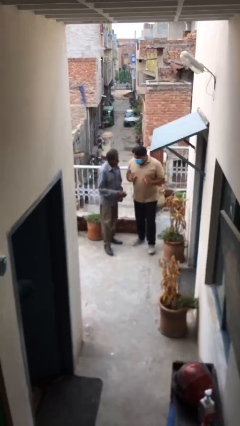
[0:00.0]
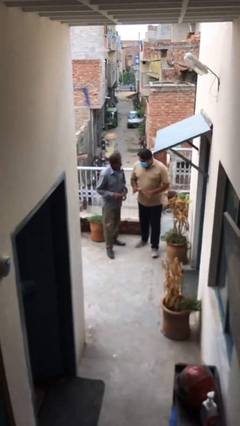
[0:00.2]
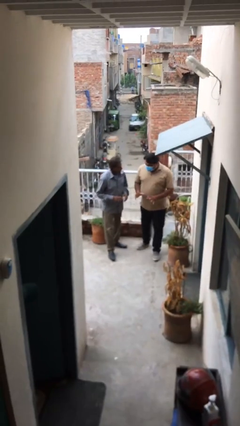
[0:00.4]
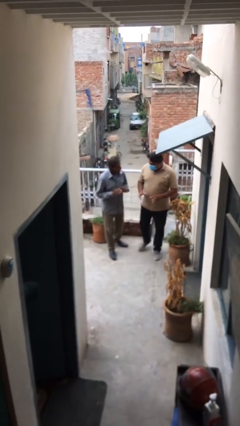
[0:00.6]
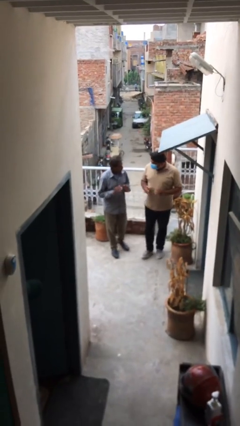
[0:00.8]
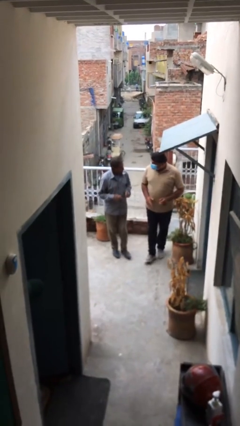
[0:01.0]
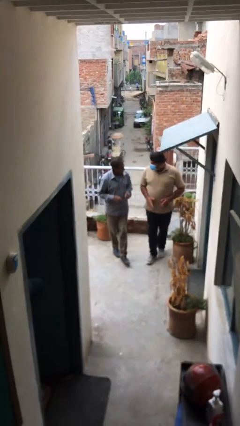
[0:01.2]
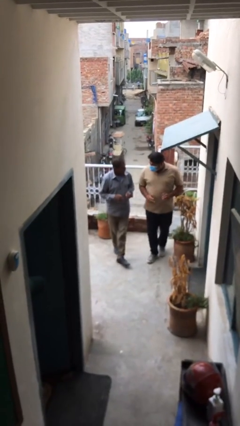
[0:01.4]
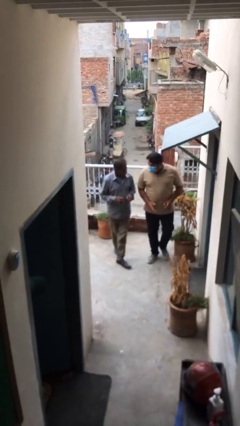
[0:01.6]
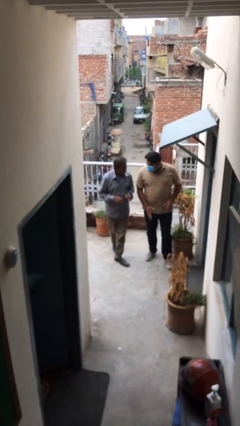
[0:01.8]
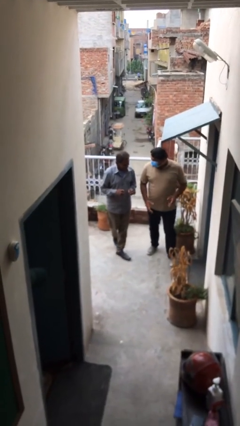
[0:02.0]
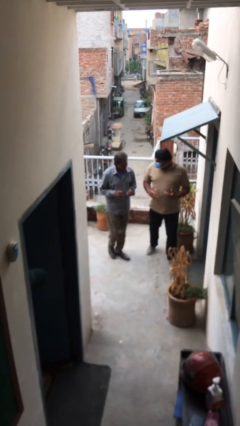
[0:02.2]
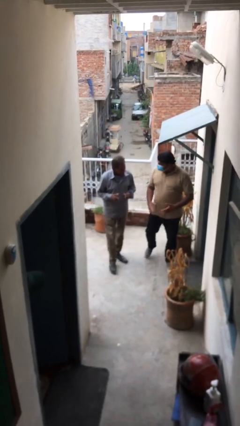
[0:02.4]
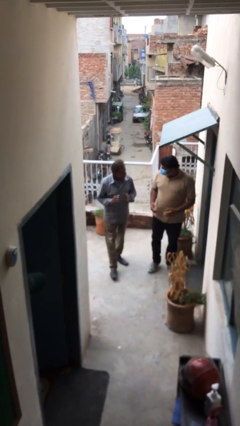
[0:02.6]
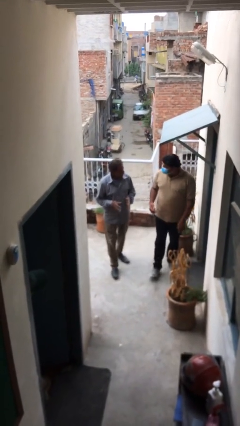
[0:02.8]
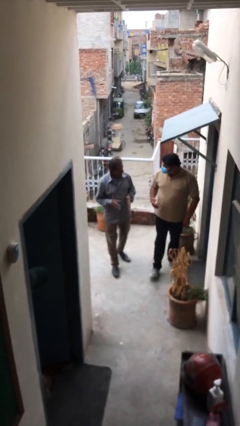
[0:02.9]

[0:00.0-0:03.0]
person talks to person

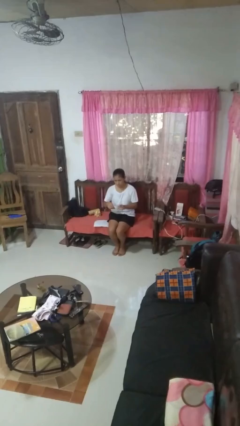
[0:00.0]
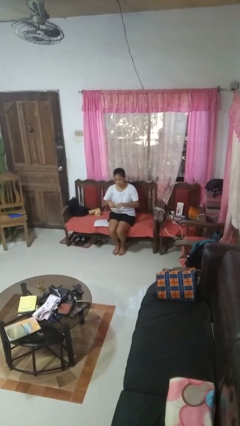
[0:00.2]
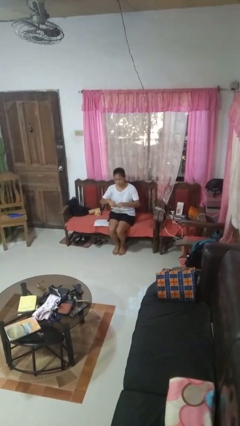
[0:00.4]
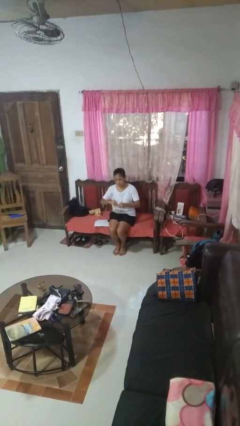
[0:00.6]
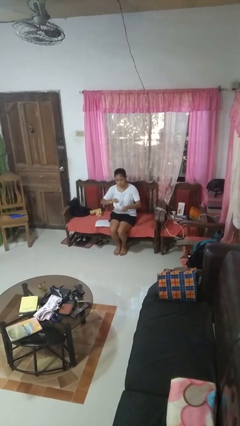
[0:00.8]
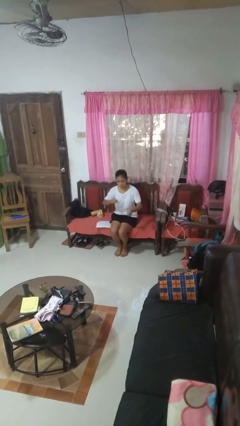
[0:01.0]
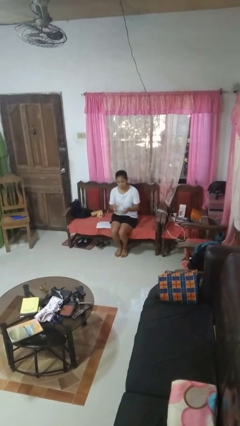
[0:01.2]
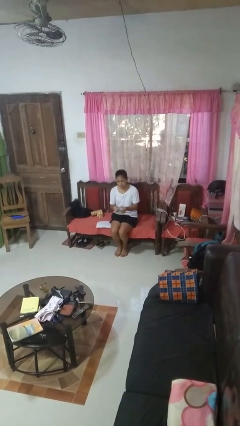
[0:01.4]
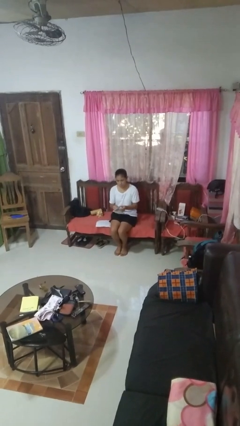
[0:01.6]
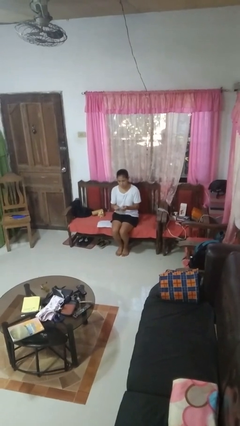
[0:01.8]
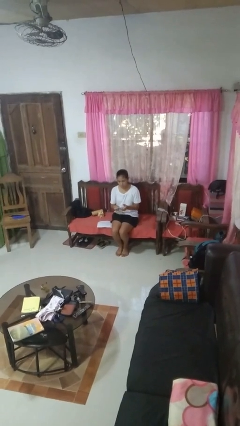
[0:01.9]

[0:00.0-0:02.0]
person tears paper

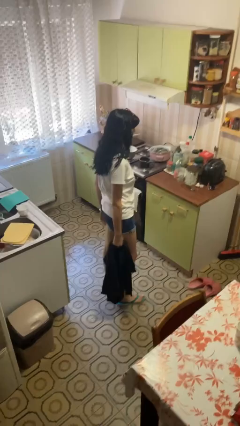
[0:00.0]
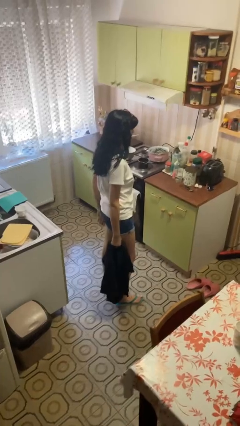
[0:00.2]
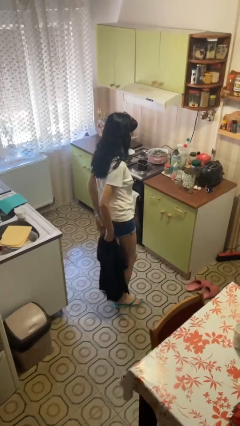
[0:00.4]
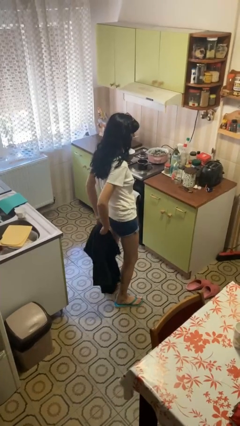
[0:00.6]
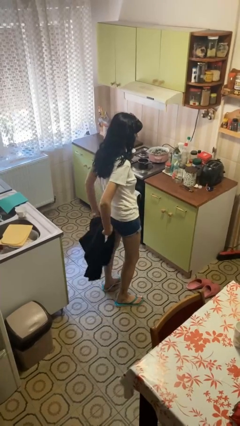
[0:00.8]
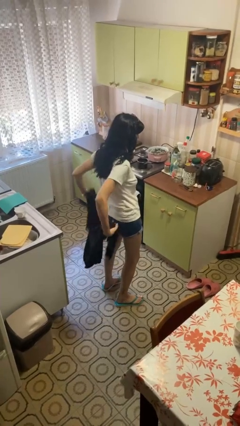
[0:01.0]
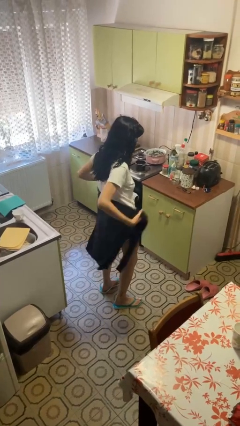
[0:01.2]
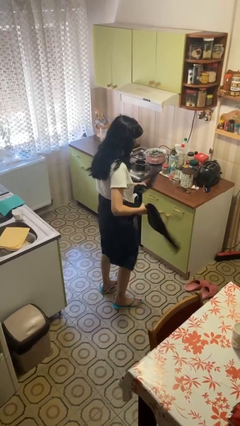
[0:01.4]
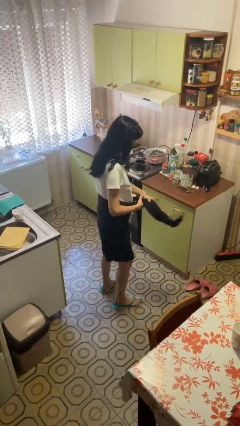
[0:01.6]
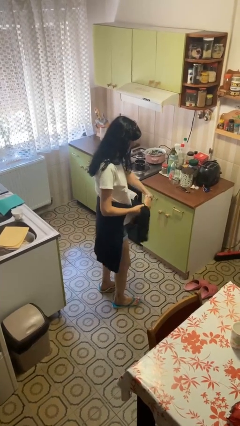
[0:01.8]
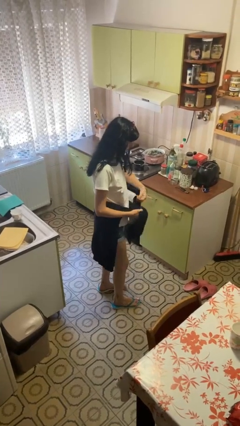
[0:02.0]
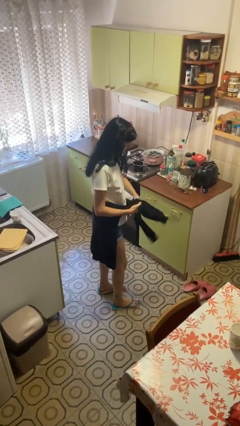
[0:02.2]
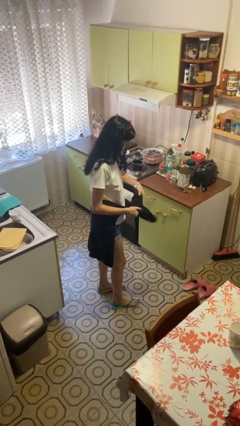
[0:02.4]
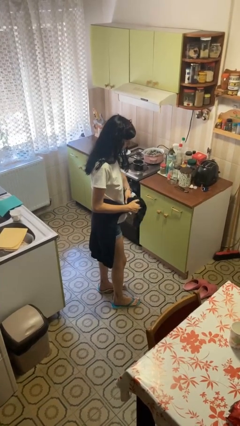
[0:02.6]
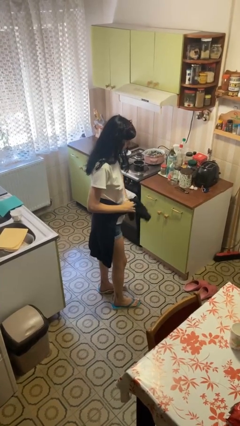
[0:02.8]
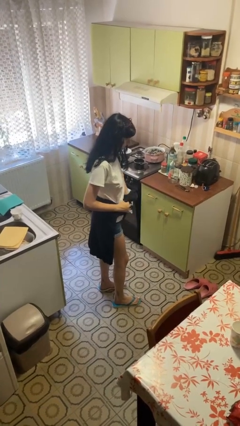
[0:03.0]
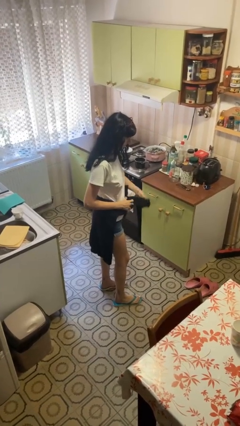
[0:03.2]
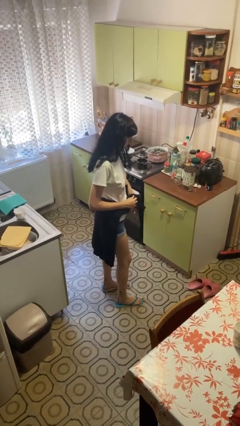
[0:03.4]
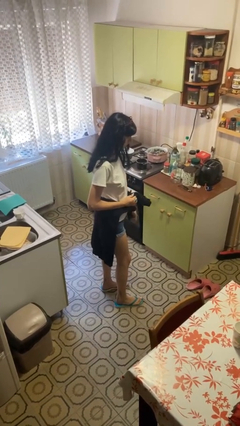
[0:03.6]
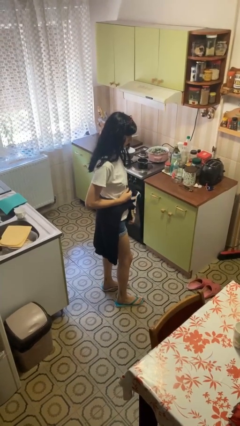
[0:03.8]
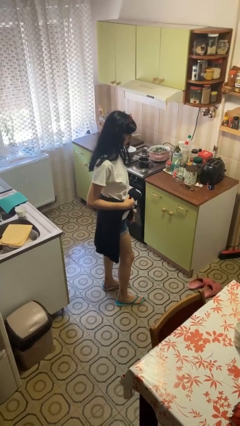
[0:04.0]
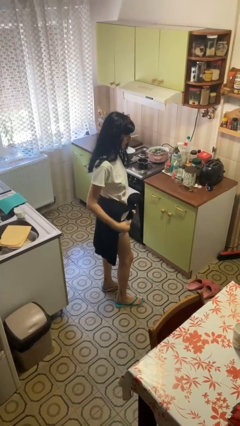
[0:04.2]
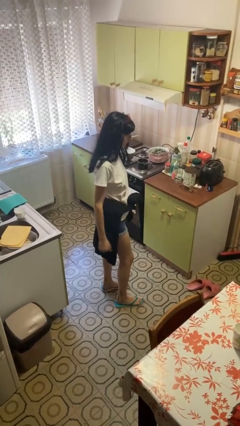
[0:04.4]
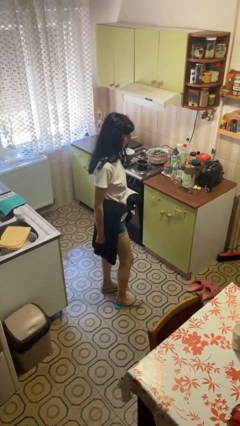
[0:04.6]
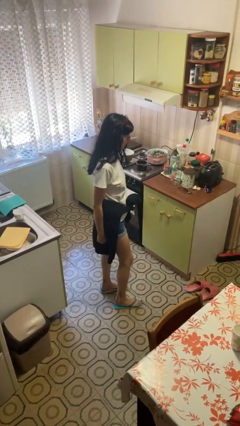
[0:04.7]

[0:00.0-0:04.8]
person ties jacket around waist

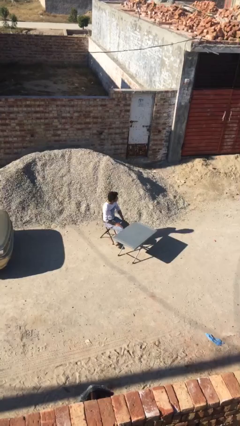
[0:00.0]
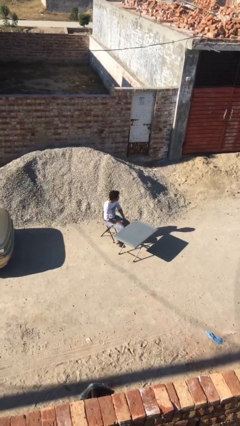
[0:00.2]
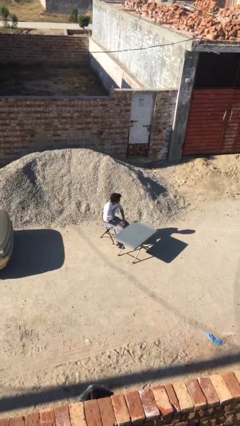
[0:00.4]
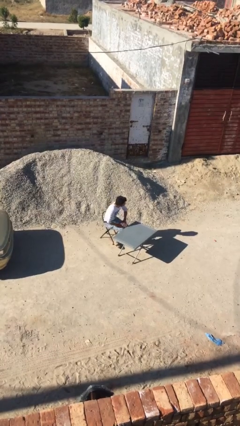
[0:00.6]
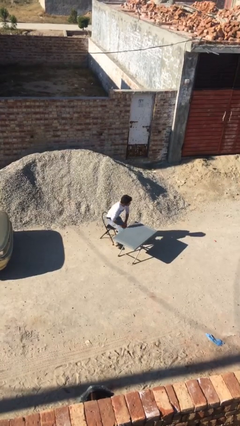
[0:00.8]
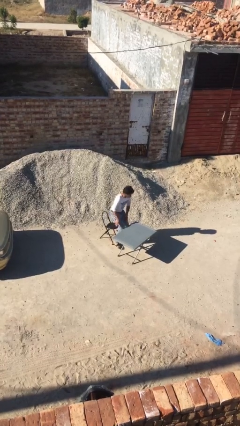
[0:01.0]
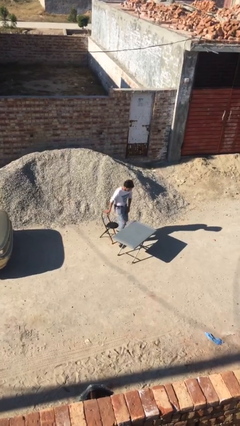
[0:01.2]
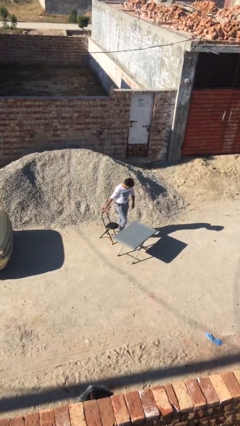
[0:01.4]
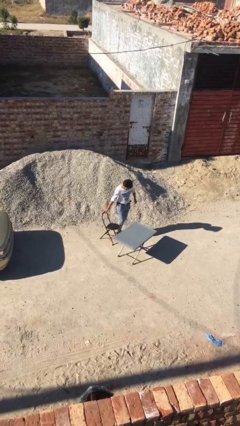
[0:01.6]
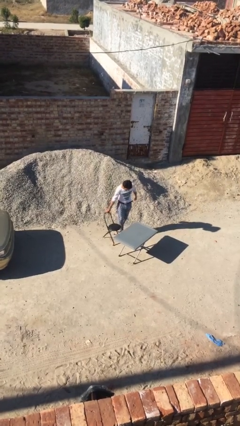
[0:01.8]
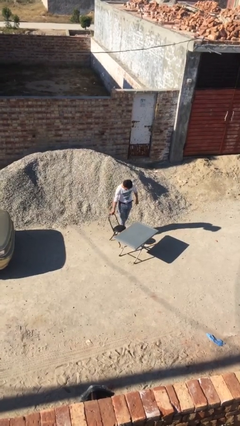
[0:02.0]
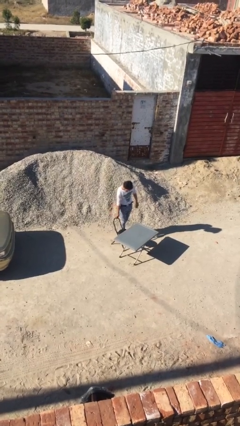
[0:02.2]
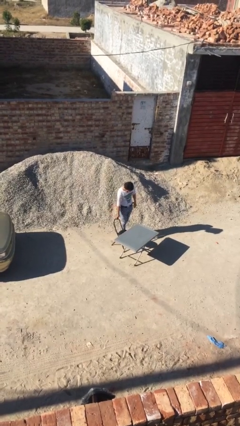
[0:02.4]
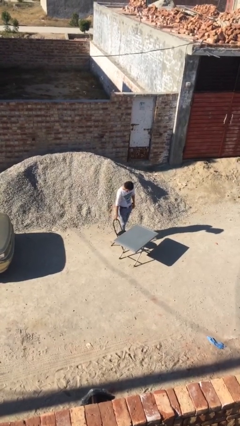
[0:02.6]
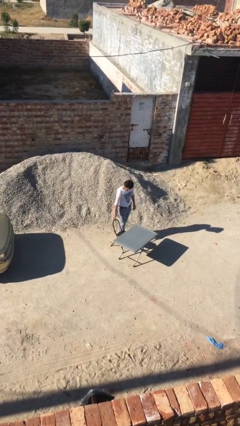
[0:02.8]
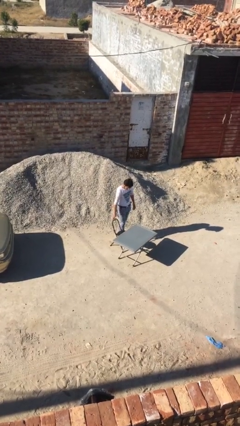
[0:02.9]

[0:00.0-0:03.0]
person stands up

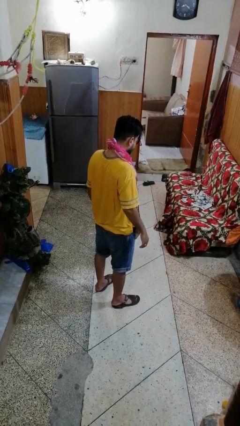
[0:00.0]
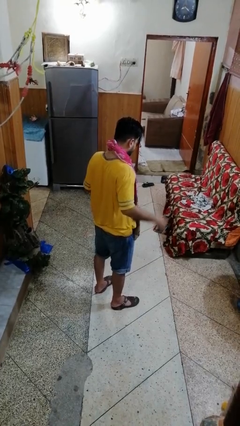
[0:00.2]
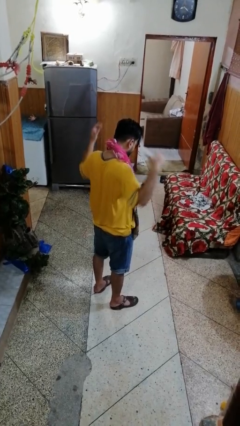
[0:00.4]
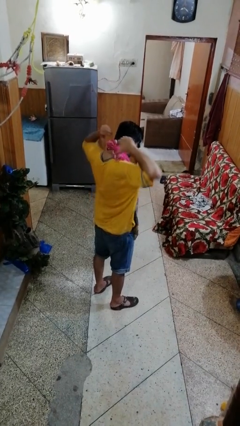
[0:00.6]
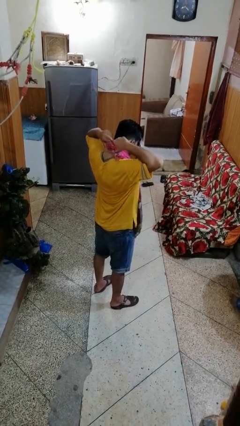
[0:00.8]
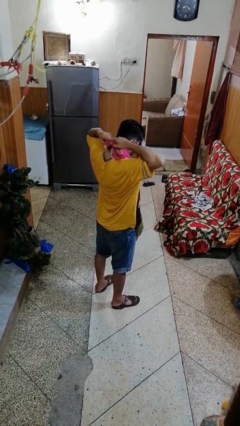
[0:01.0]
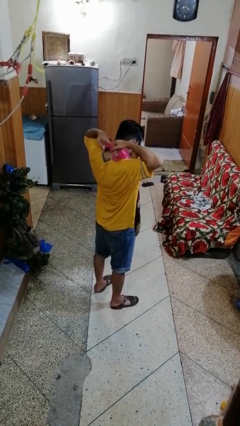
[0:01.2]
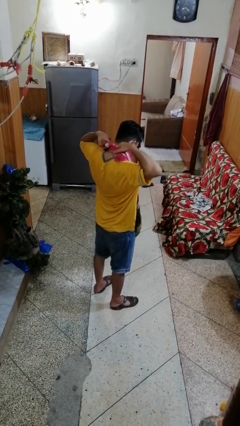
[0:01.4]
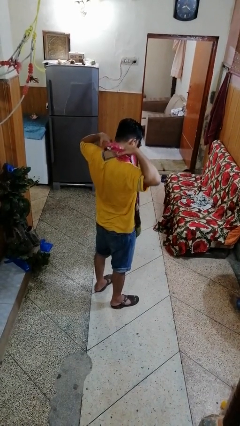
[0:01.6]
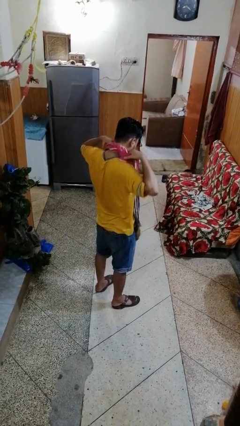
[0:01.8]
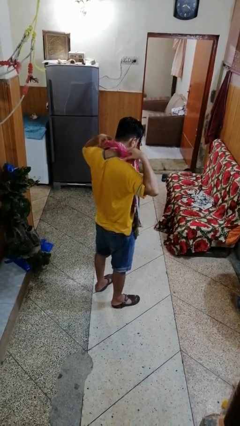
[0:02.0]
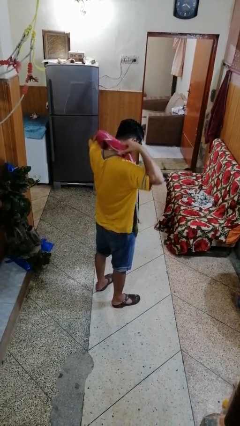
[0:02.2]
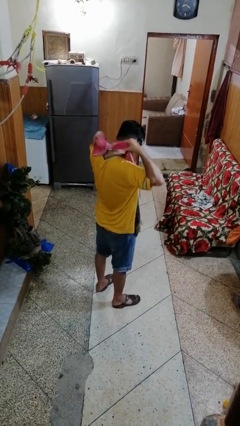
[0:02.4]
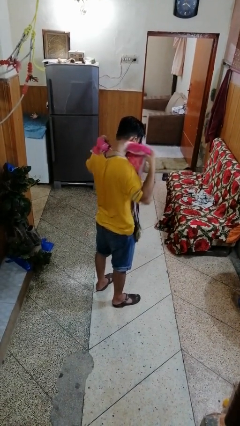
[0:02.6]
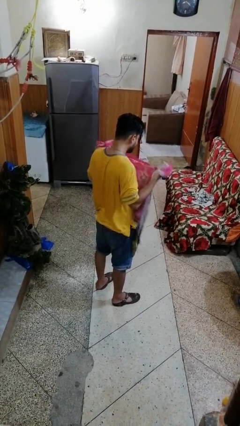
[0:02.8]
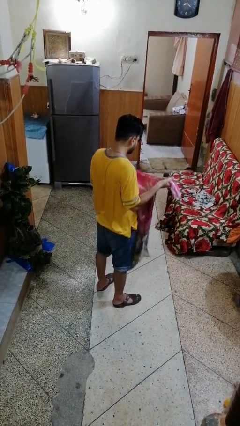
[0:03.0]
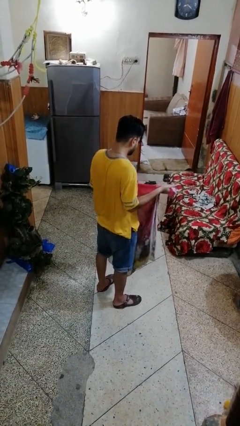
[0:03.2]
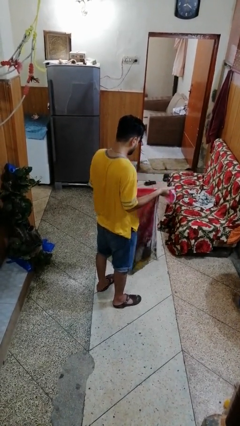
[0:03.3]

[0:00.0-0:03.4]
person takes off apron

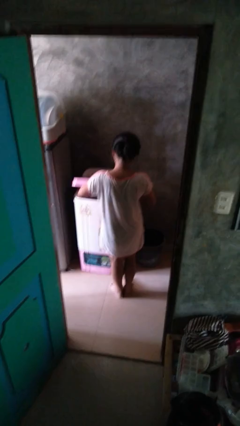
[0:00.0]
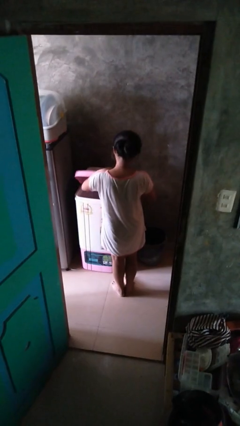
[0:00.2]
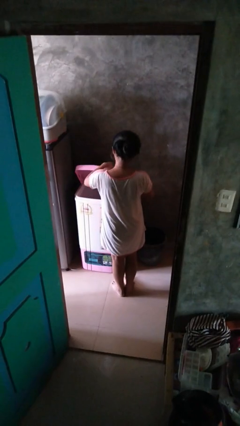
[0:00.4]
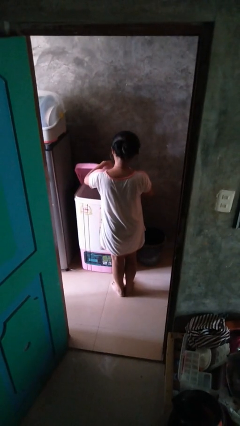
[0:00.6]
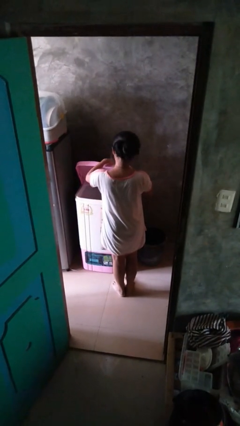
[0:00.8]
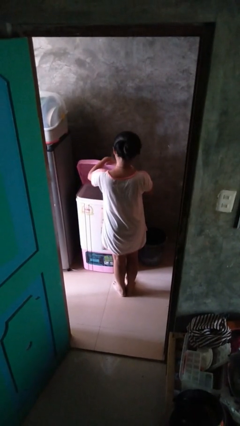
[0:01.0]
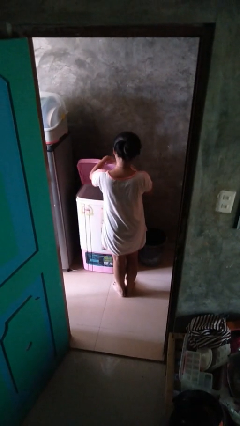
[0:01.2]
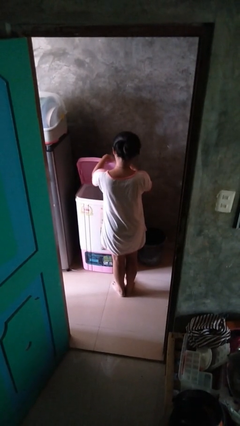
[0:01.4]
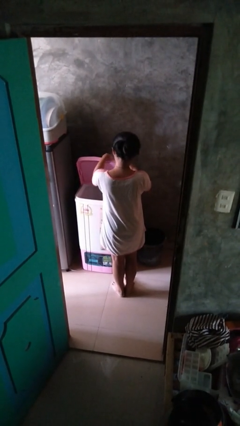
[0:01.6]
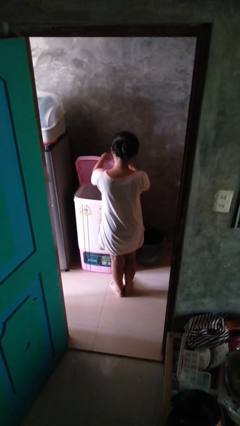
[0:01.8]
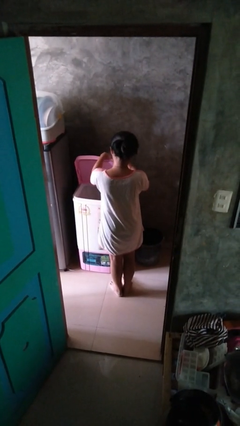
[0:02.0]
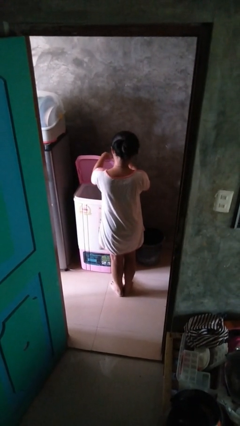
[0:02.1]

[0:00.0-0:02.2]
person opens clothes washer
